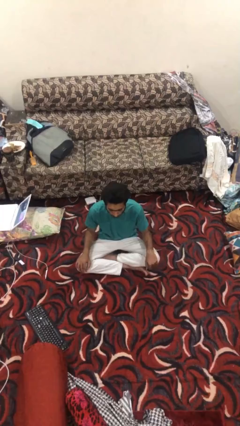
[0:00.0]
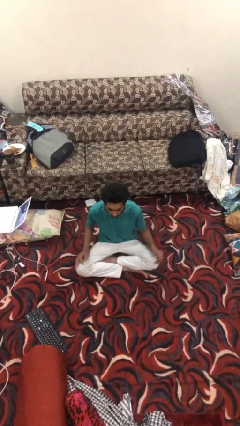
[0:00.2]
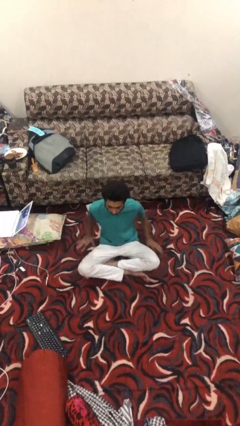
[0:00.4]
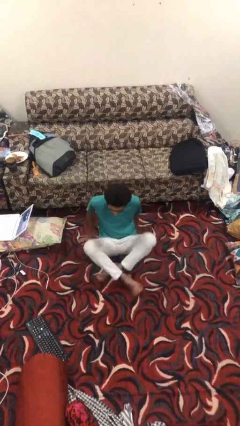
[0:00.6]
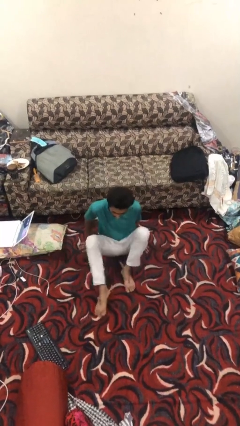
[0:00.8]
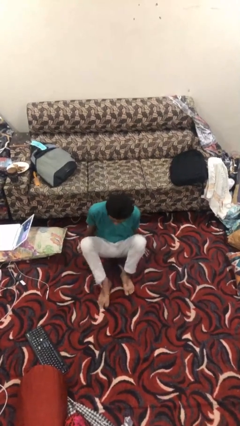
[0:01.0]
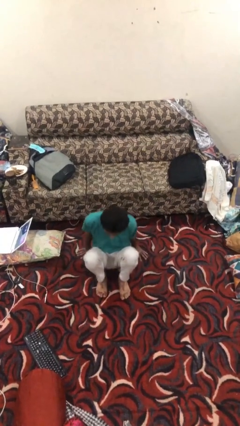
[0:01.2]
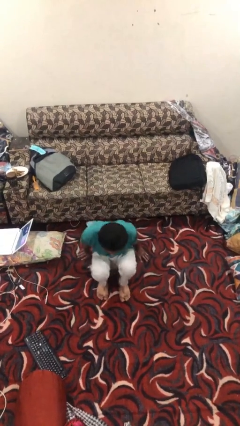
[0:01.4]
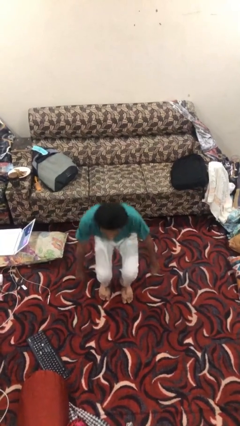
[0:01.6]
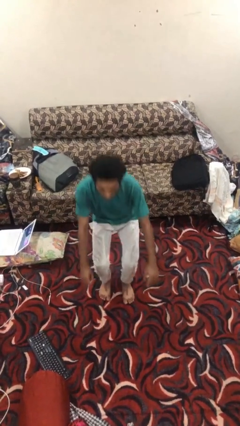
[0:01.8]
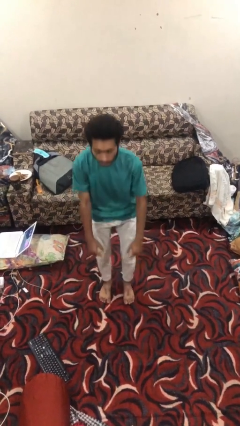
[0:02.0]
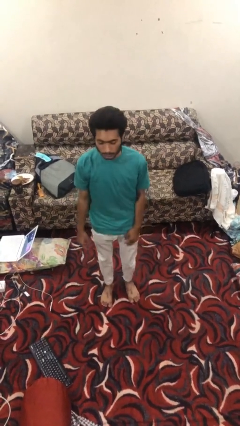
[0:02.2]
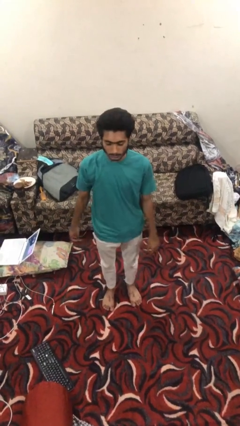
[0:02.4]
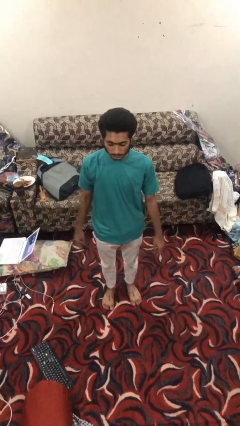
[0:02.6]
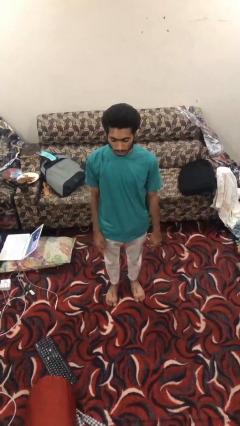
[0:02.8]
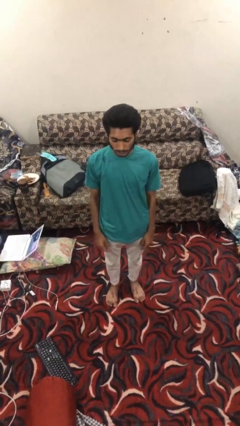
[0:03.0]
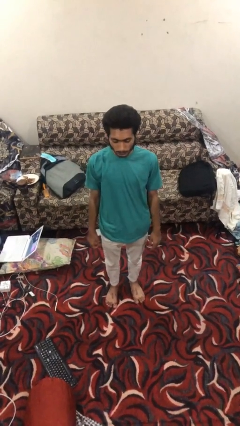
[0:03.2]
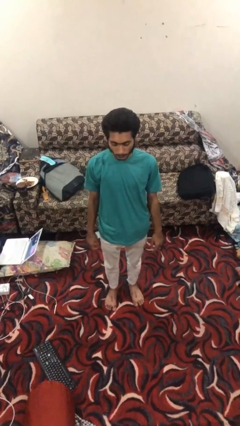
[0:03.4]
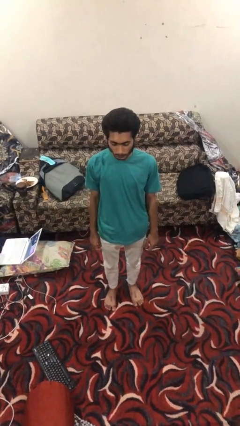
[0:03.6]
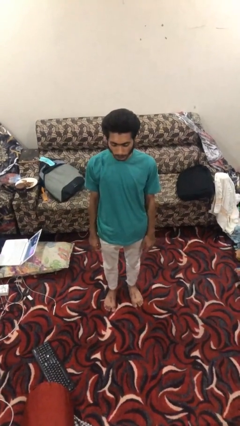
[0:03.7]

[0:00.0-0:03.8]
person stands up from floor
